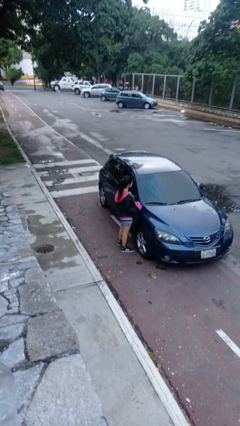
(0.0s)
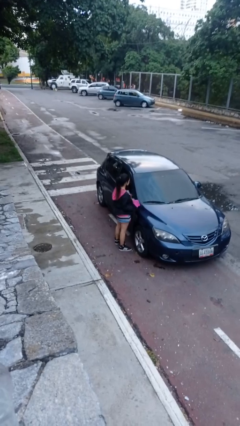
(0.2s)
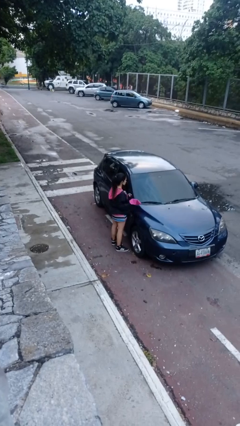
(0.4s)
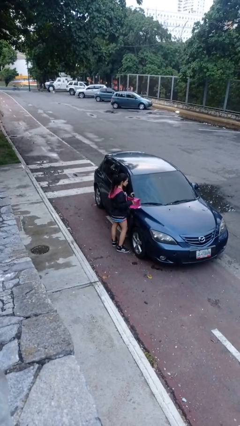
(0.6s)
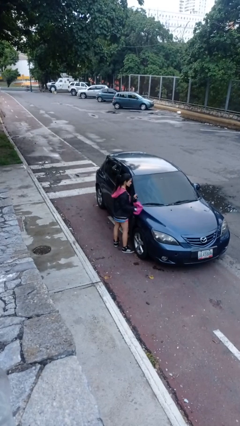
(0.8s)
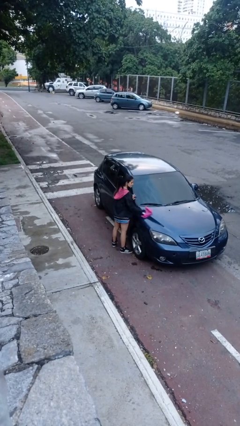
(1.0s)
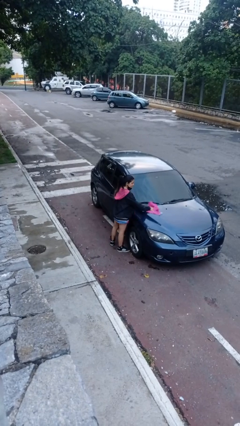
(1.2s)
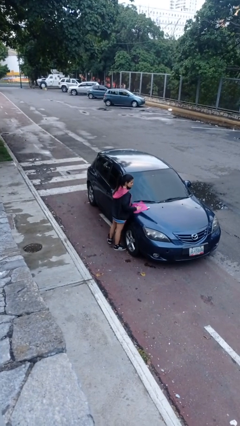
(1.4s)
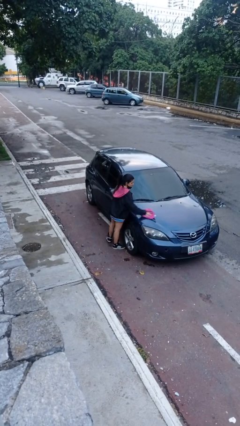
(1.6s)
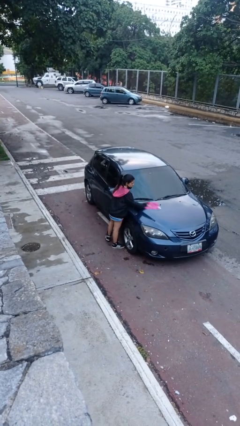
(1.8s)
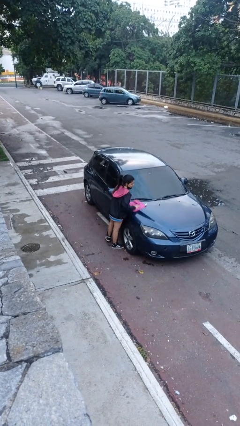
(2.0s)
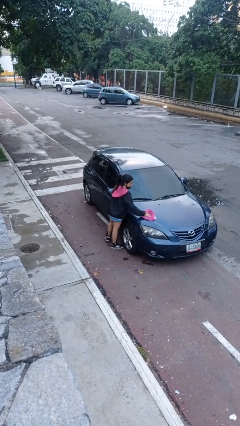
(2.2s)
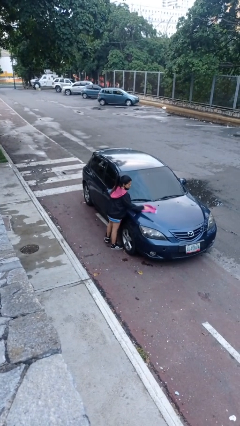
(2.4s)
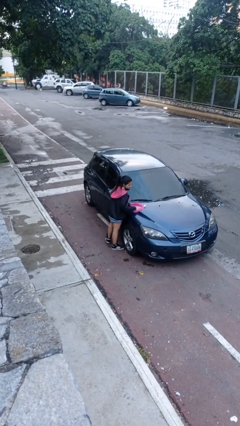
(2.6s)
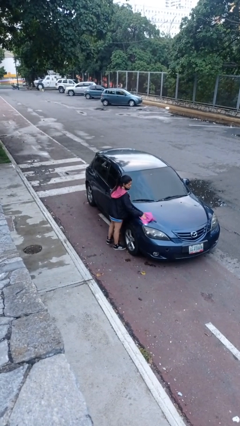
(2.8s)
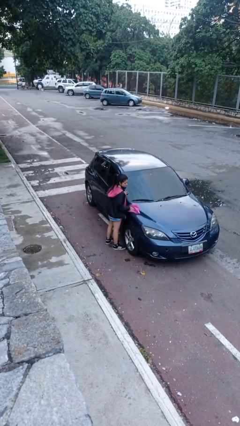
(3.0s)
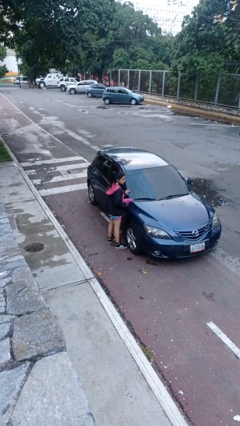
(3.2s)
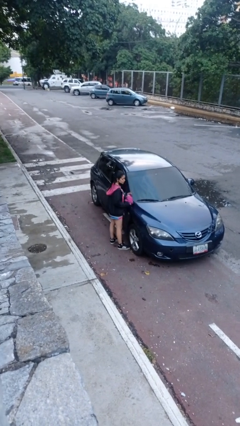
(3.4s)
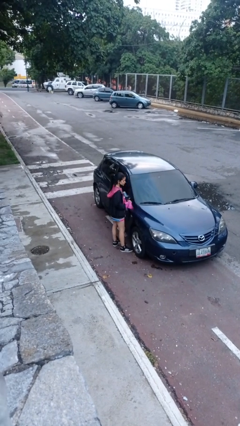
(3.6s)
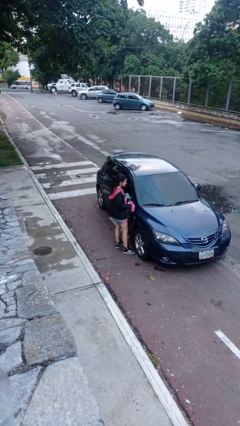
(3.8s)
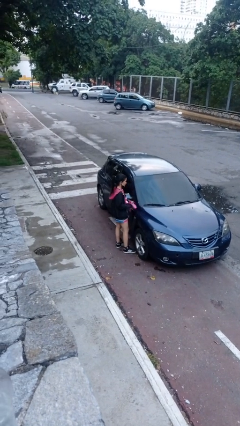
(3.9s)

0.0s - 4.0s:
person polishes car with rag

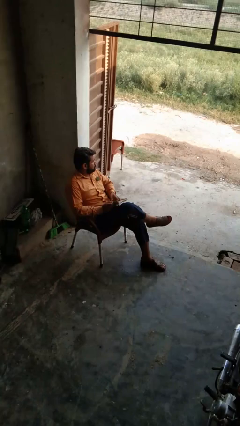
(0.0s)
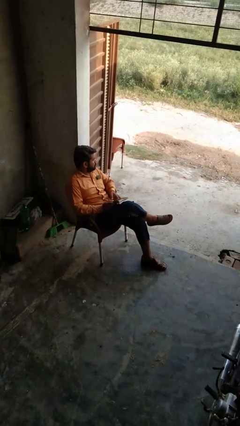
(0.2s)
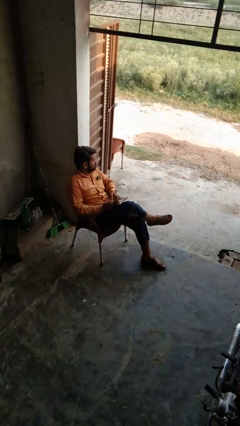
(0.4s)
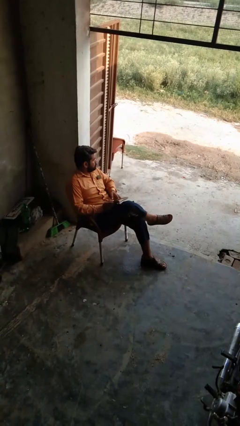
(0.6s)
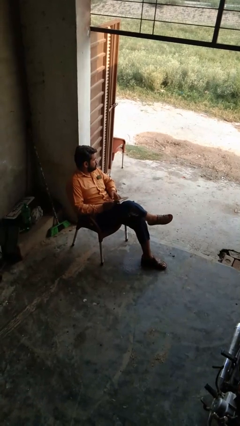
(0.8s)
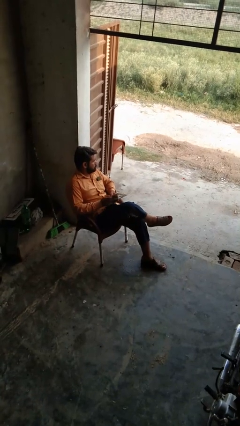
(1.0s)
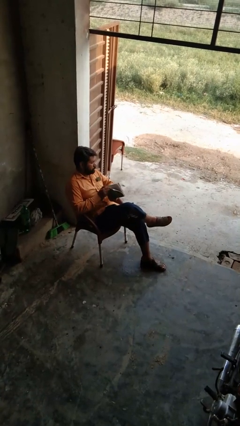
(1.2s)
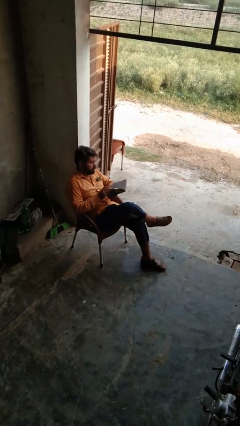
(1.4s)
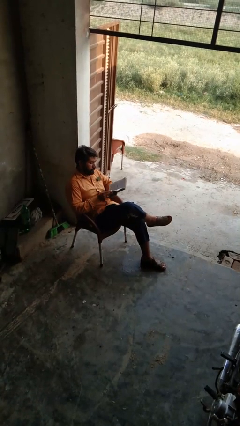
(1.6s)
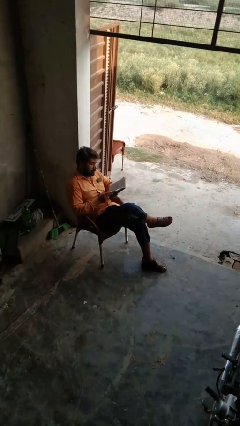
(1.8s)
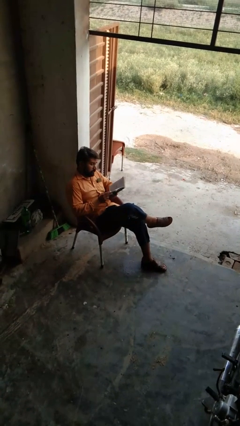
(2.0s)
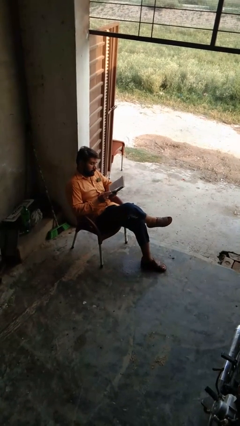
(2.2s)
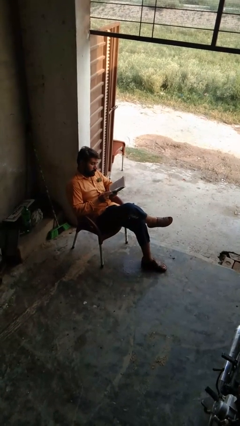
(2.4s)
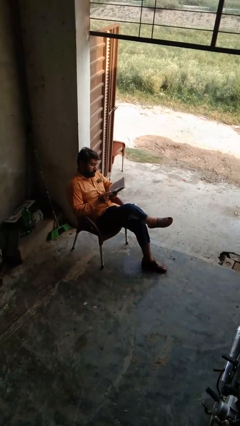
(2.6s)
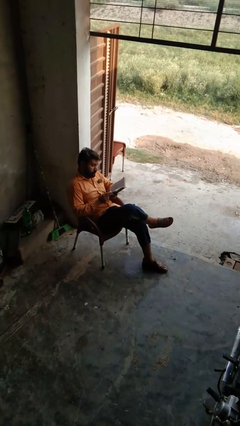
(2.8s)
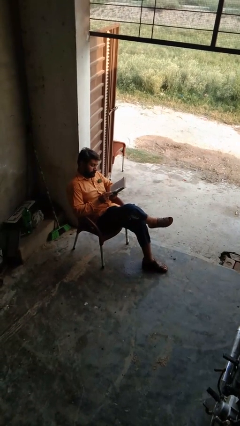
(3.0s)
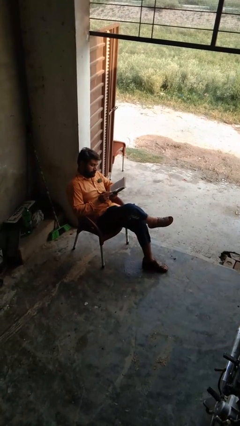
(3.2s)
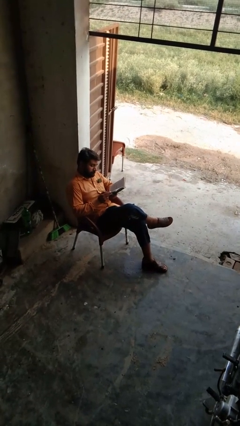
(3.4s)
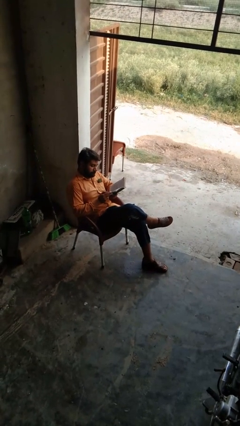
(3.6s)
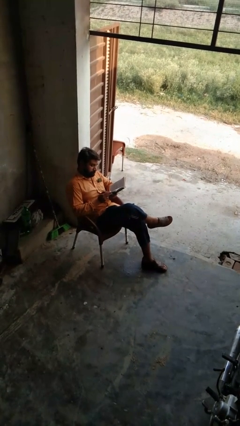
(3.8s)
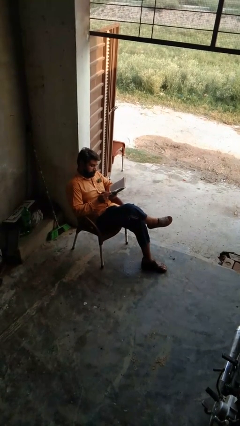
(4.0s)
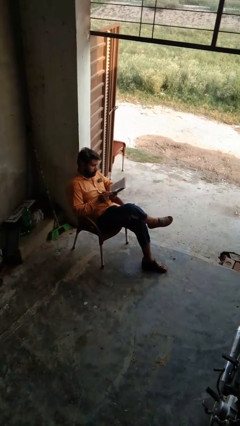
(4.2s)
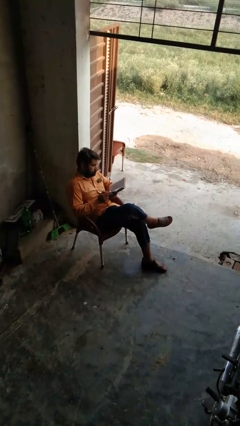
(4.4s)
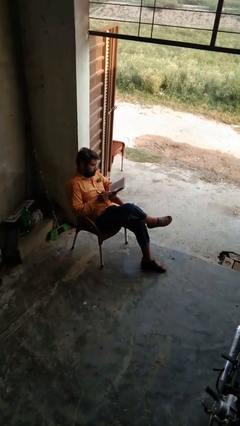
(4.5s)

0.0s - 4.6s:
person reads book

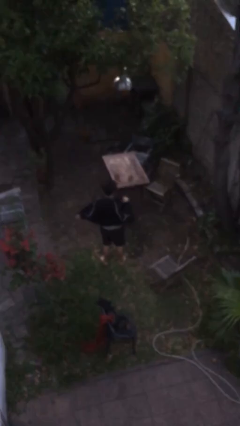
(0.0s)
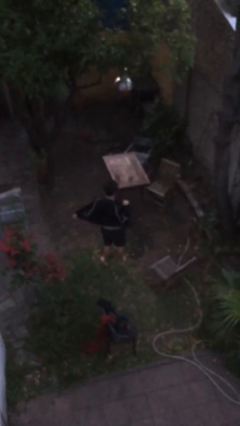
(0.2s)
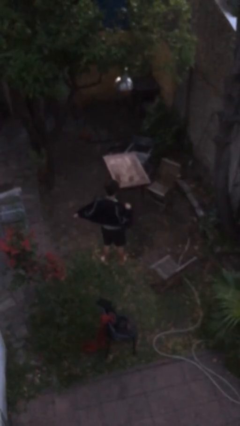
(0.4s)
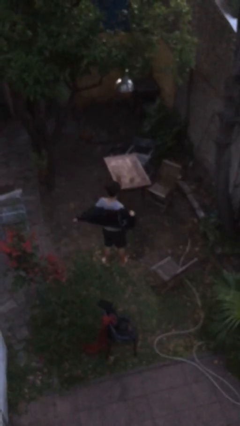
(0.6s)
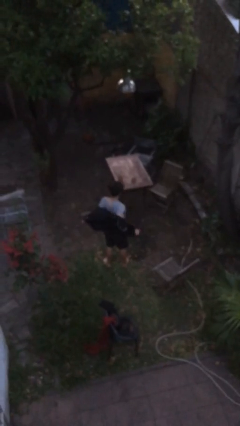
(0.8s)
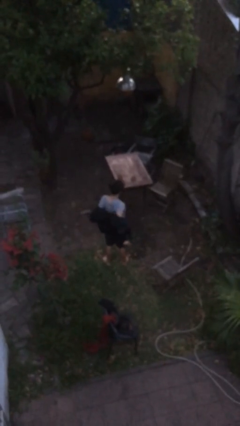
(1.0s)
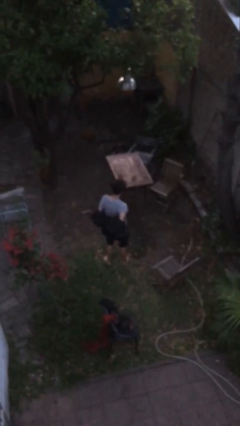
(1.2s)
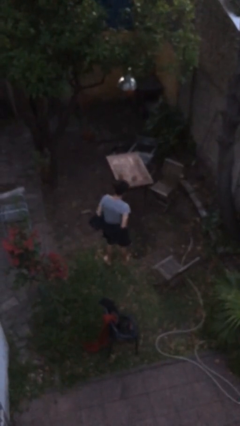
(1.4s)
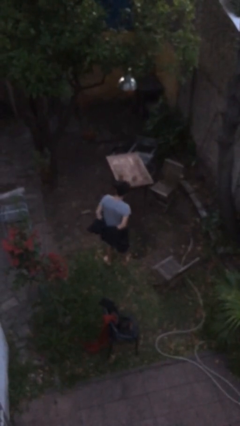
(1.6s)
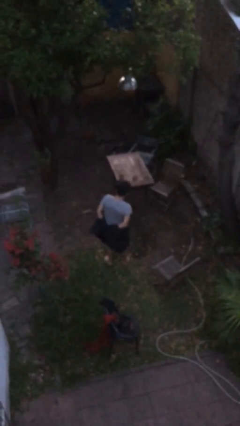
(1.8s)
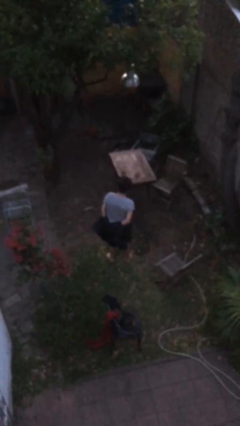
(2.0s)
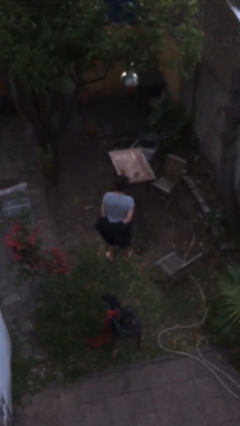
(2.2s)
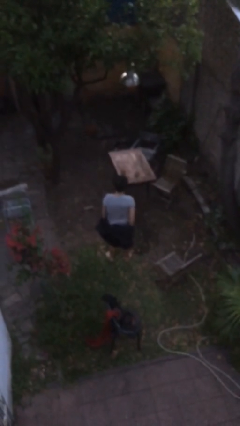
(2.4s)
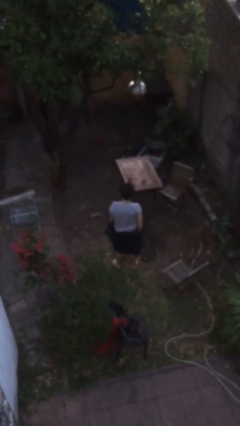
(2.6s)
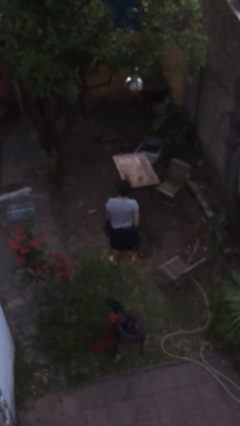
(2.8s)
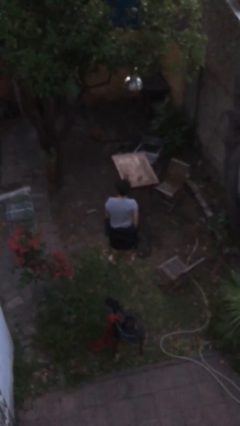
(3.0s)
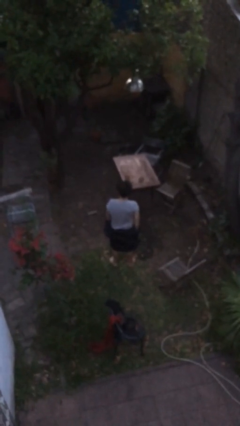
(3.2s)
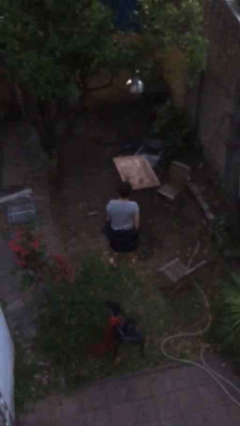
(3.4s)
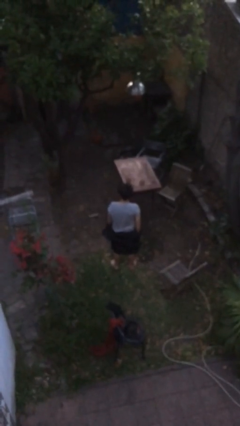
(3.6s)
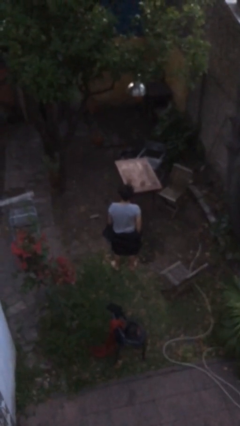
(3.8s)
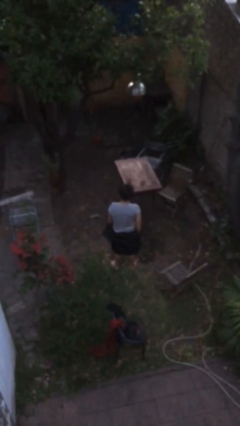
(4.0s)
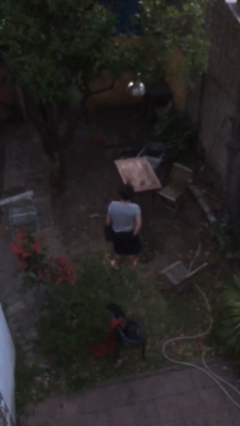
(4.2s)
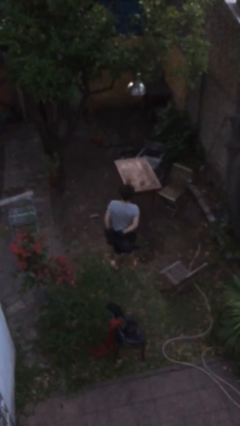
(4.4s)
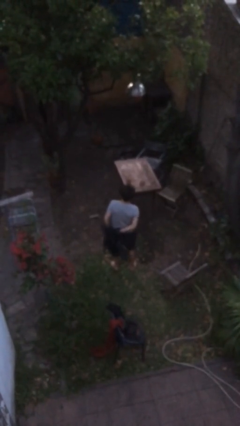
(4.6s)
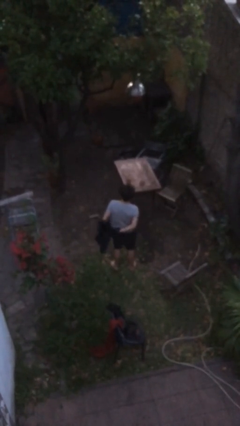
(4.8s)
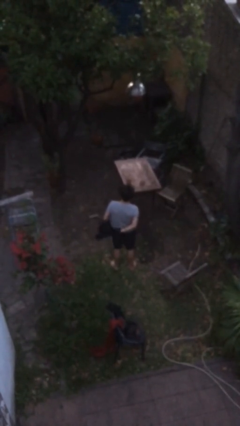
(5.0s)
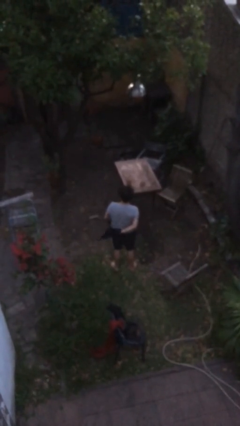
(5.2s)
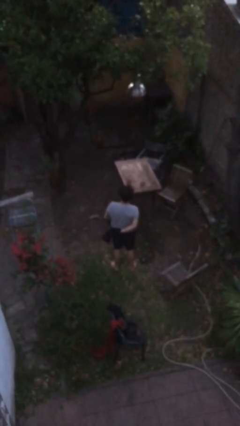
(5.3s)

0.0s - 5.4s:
person takes off jacket

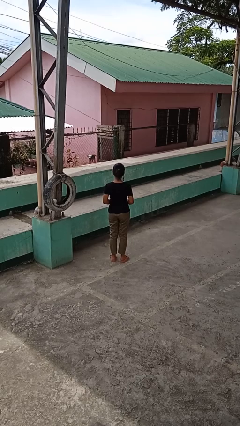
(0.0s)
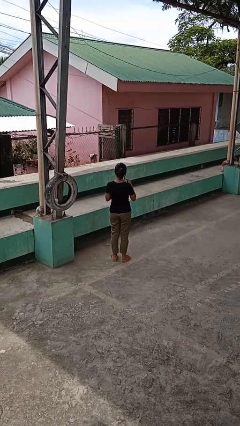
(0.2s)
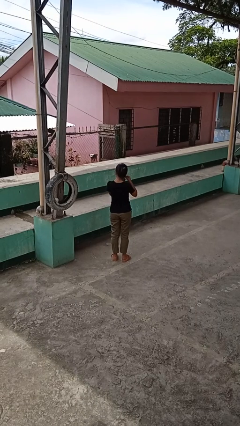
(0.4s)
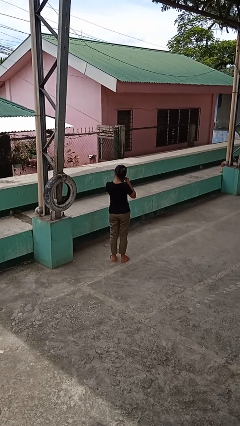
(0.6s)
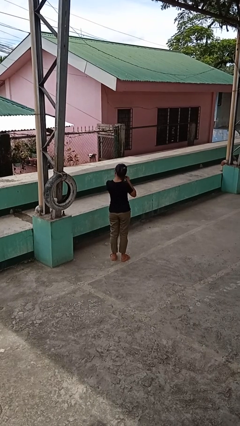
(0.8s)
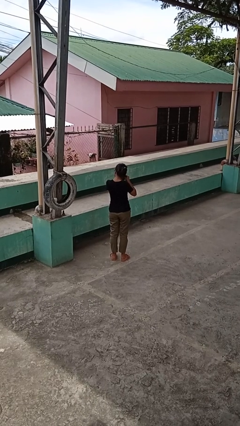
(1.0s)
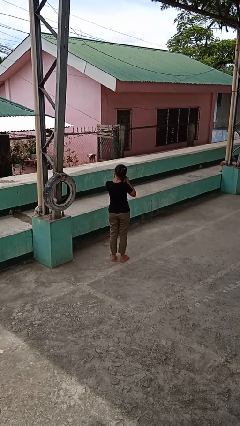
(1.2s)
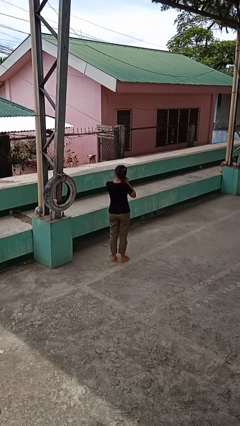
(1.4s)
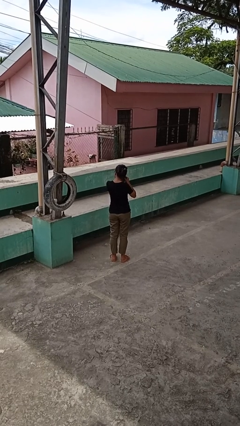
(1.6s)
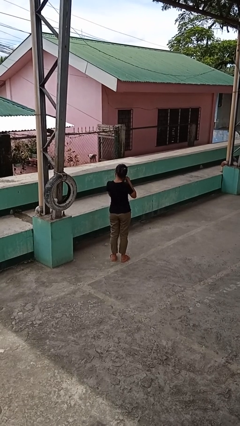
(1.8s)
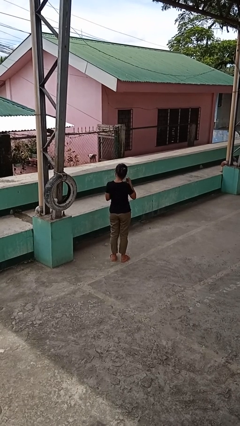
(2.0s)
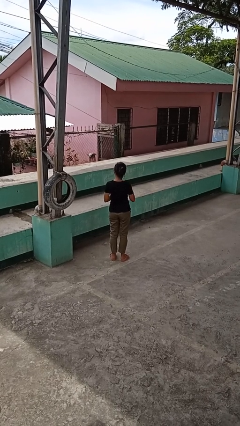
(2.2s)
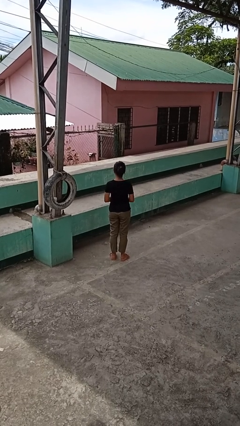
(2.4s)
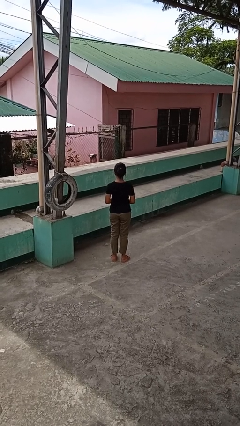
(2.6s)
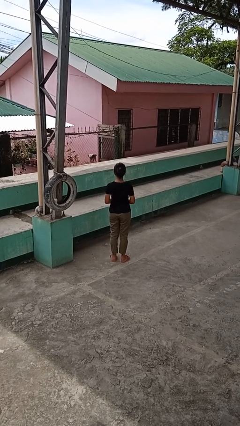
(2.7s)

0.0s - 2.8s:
person takes off earrings

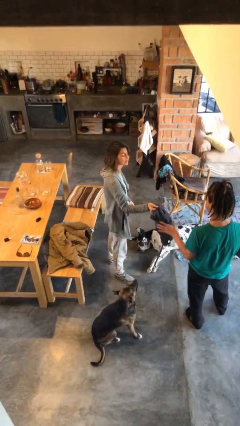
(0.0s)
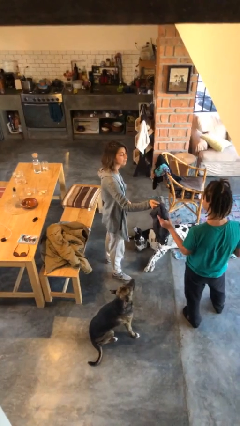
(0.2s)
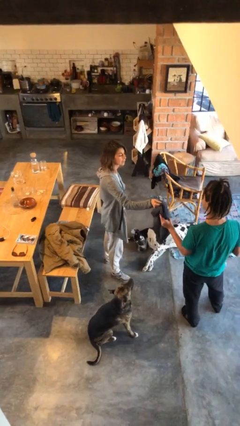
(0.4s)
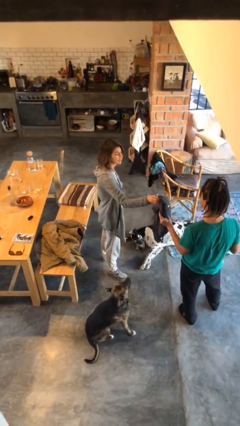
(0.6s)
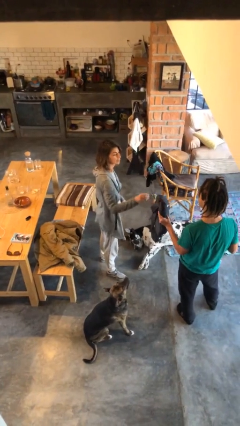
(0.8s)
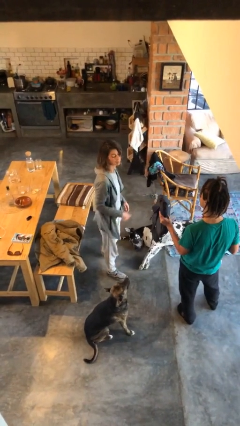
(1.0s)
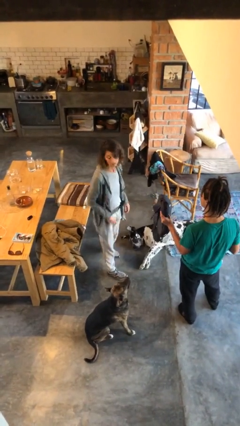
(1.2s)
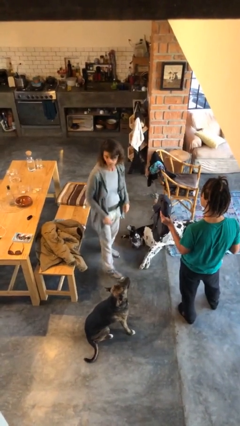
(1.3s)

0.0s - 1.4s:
person transfers object to person
